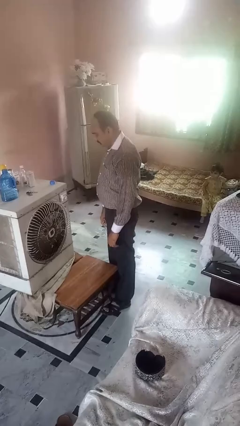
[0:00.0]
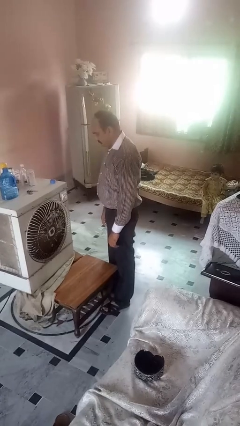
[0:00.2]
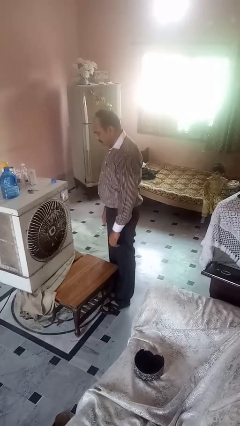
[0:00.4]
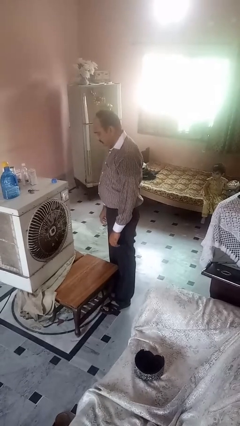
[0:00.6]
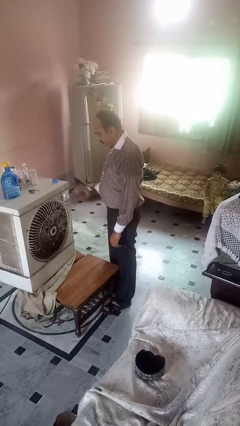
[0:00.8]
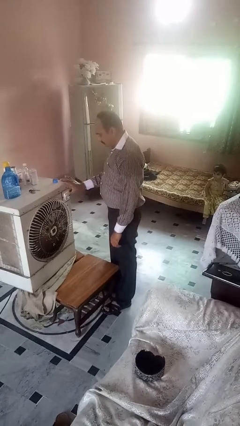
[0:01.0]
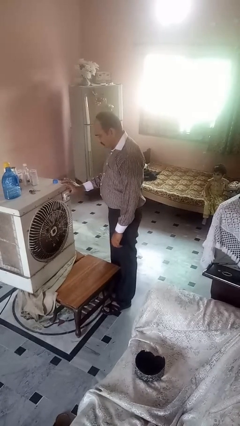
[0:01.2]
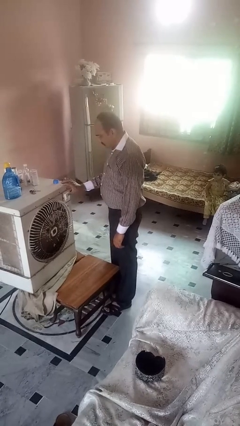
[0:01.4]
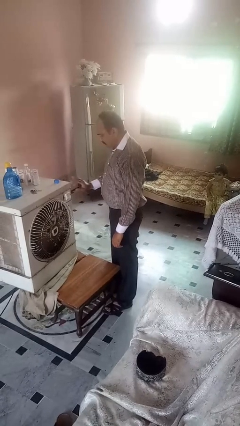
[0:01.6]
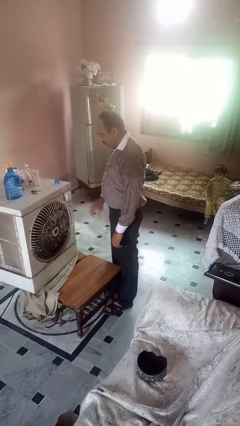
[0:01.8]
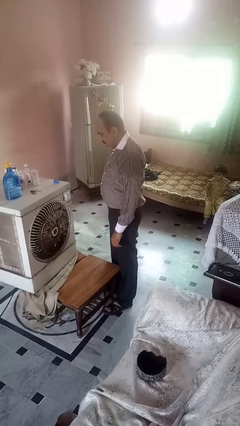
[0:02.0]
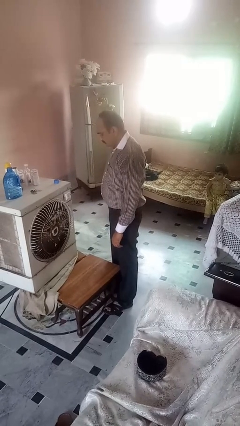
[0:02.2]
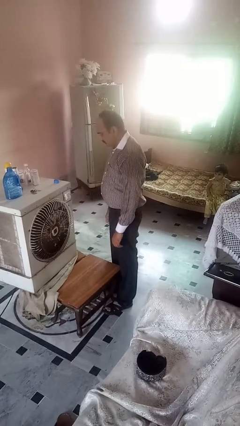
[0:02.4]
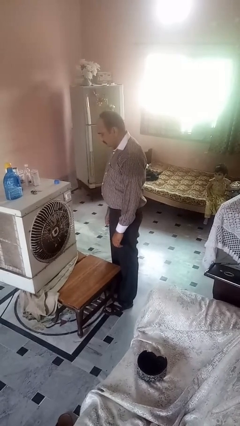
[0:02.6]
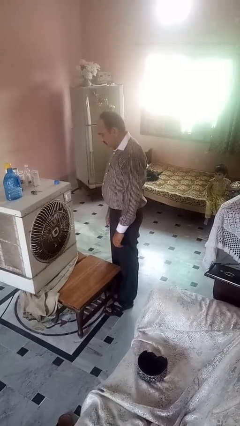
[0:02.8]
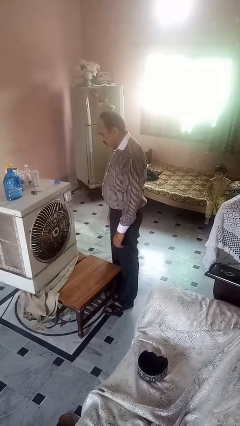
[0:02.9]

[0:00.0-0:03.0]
person turns off fan

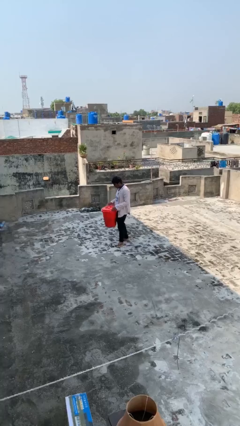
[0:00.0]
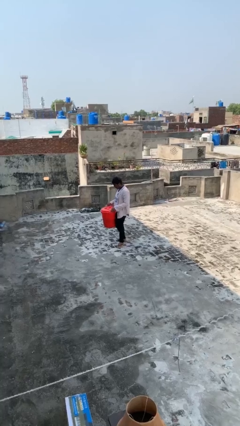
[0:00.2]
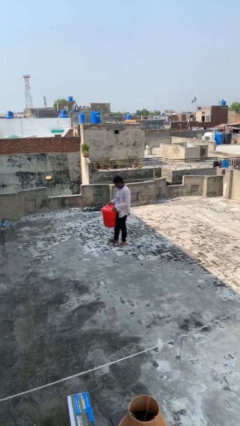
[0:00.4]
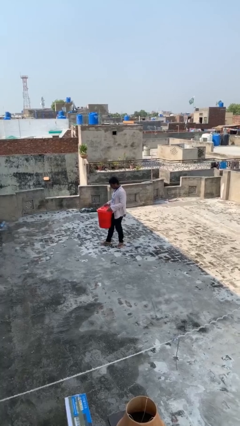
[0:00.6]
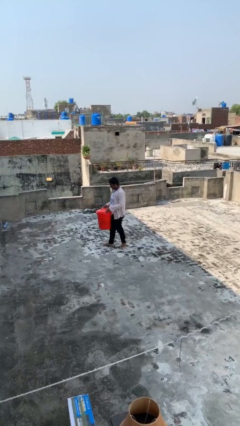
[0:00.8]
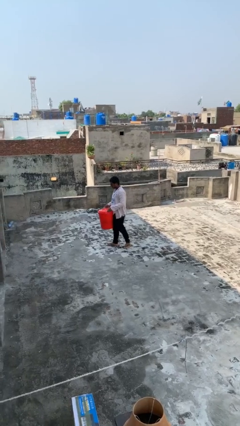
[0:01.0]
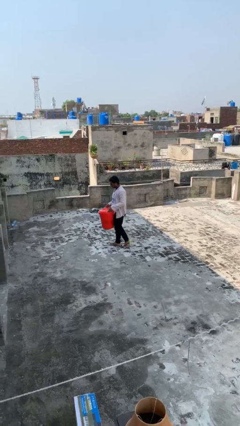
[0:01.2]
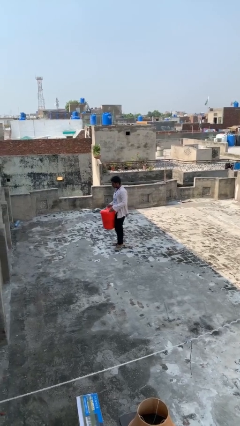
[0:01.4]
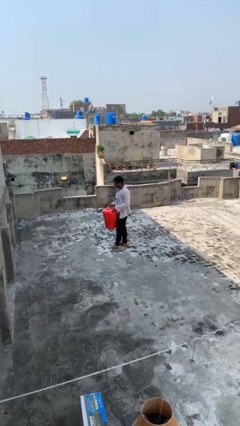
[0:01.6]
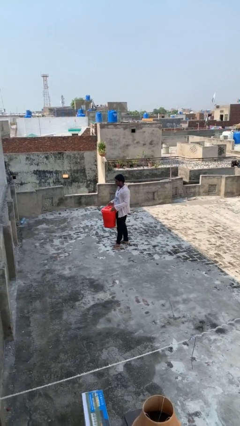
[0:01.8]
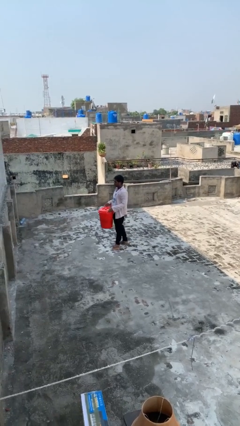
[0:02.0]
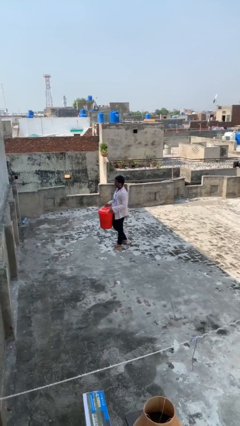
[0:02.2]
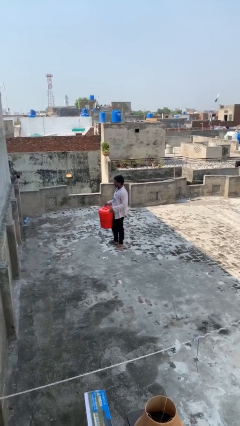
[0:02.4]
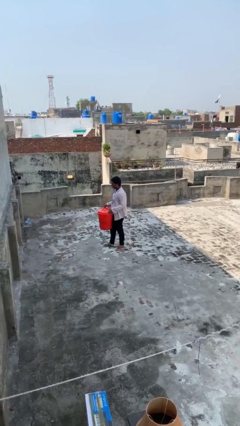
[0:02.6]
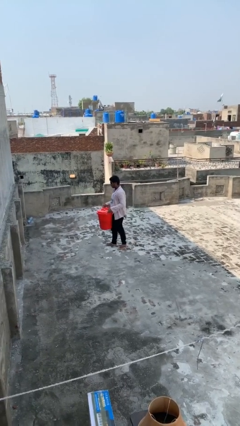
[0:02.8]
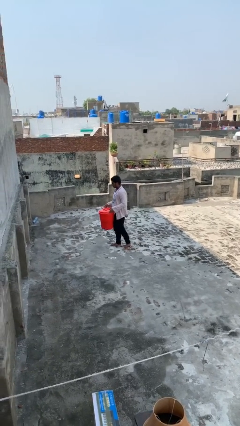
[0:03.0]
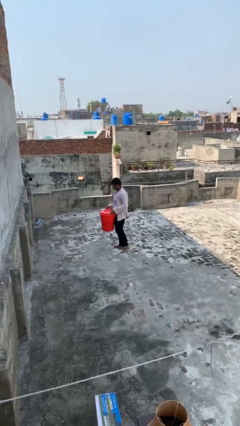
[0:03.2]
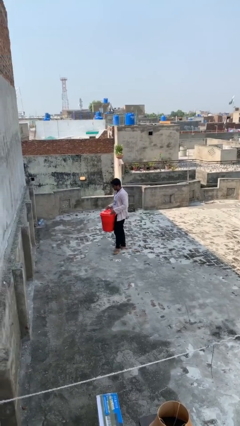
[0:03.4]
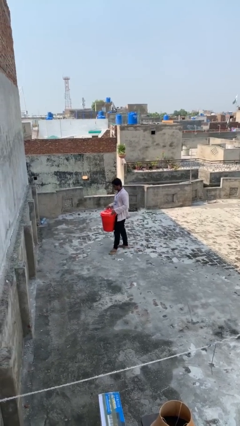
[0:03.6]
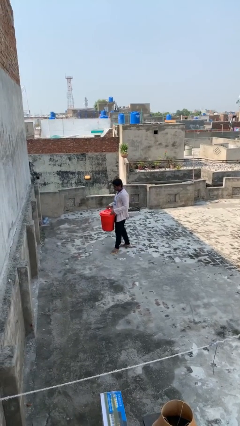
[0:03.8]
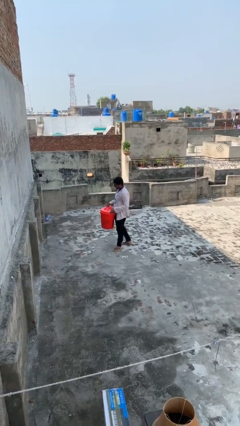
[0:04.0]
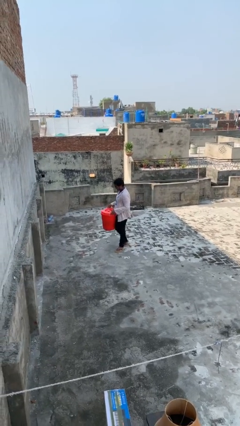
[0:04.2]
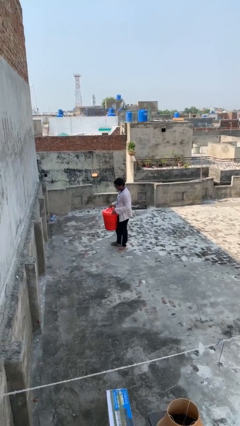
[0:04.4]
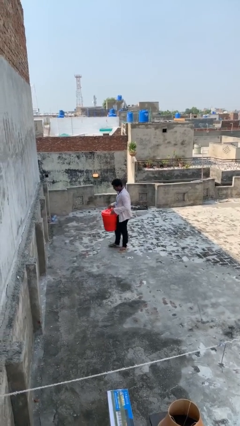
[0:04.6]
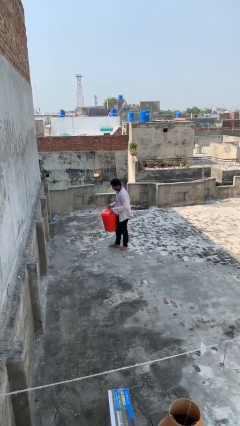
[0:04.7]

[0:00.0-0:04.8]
person carries heavy object

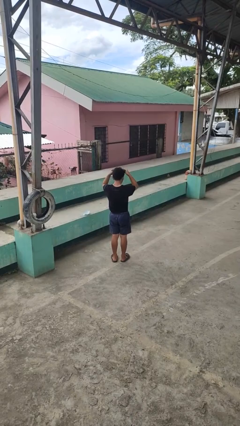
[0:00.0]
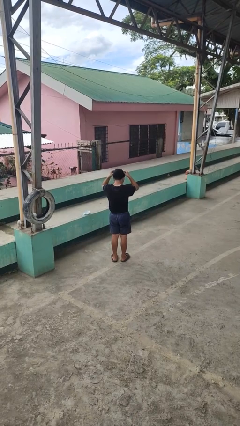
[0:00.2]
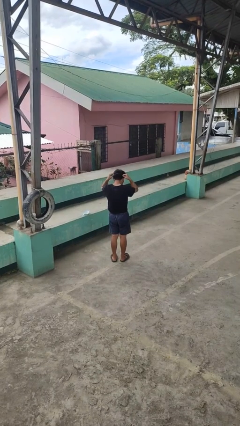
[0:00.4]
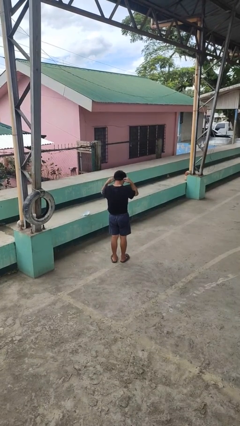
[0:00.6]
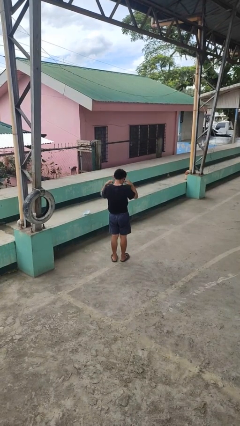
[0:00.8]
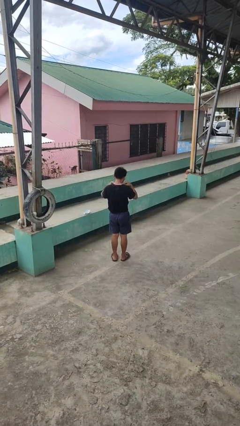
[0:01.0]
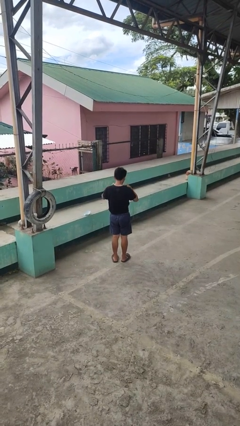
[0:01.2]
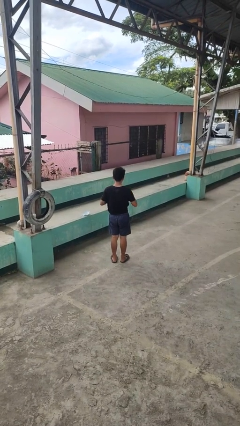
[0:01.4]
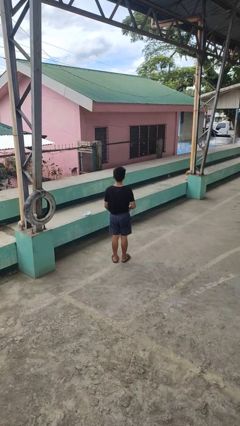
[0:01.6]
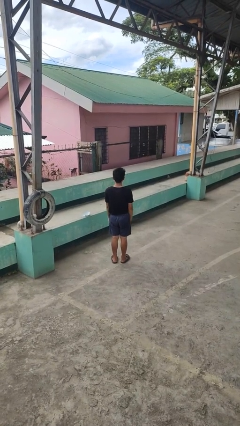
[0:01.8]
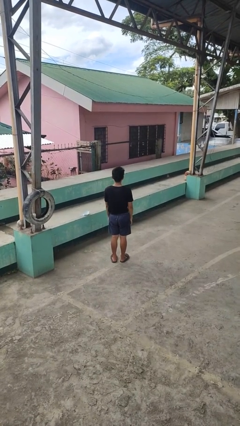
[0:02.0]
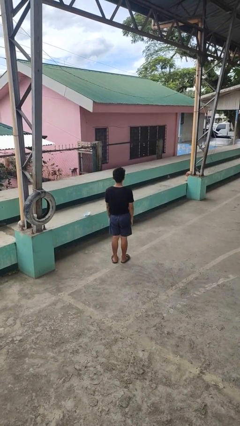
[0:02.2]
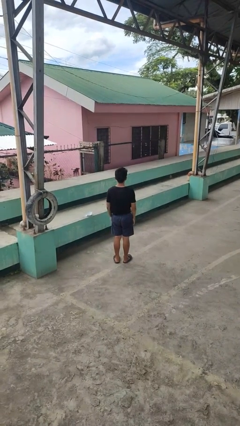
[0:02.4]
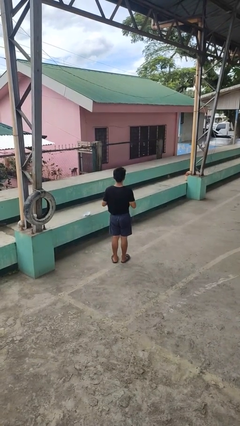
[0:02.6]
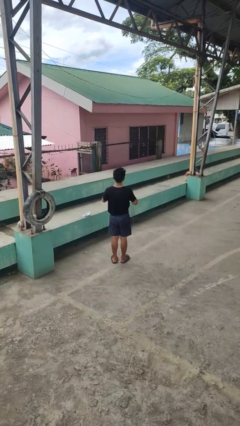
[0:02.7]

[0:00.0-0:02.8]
person puts on necklace

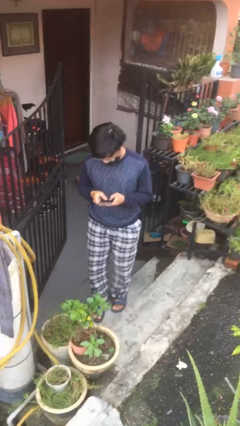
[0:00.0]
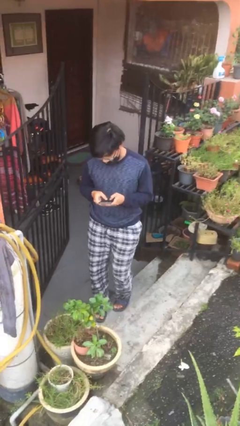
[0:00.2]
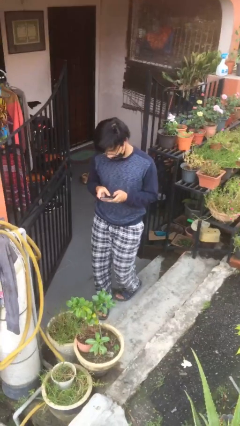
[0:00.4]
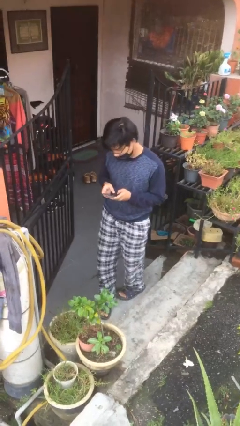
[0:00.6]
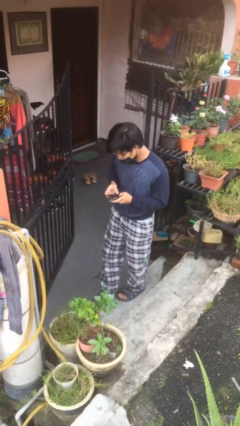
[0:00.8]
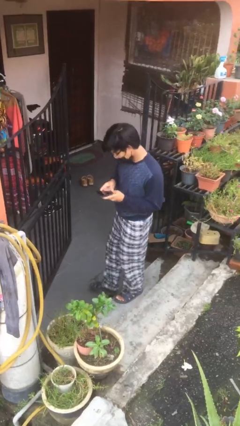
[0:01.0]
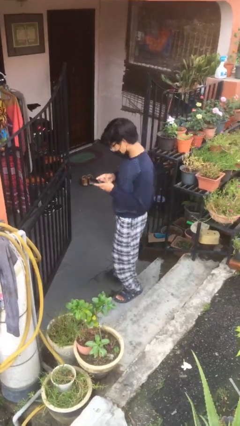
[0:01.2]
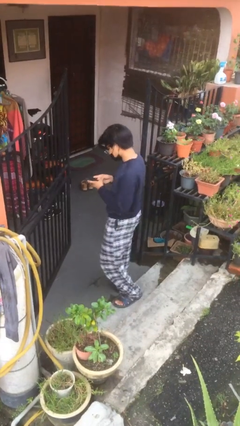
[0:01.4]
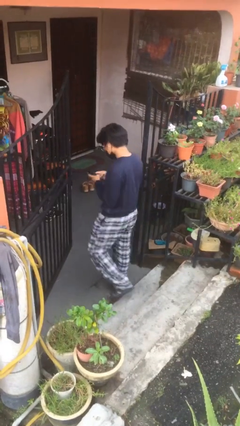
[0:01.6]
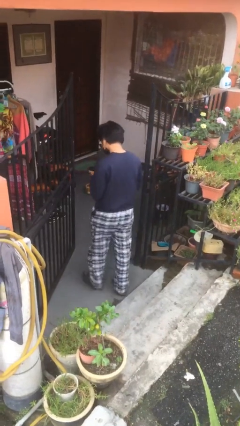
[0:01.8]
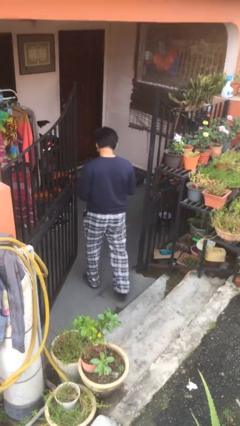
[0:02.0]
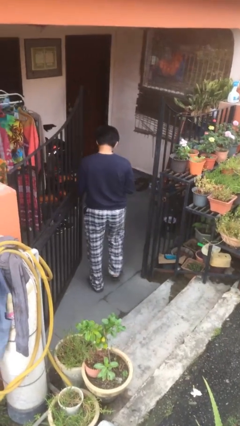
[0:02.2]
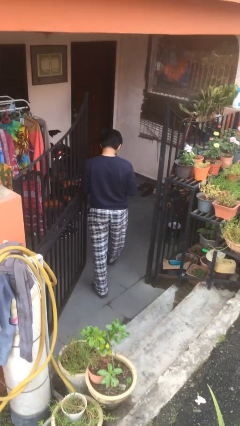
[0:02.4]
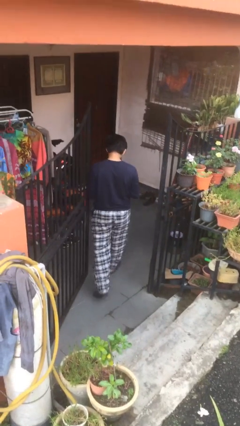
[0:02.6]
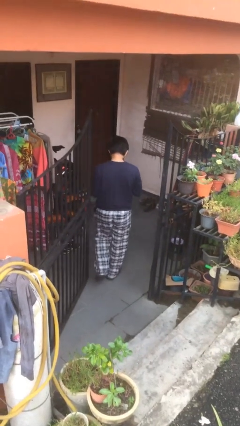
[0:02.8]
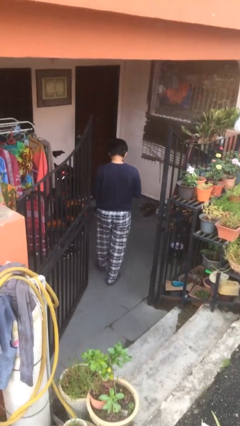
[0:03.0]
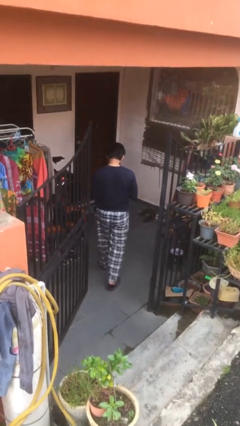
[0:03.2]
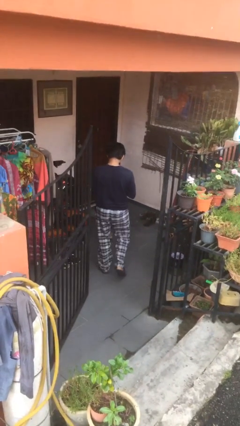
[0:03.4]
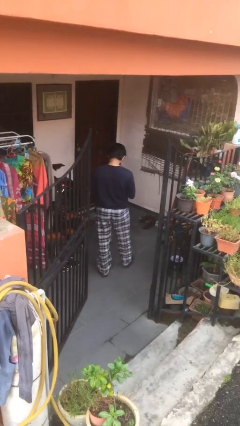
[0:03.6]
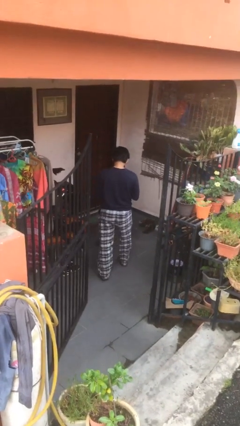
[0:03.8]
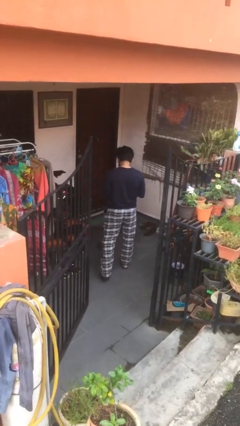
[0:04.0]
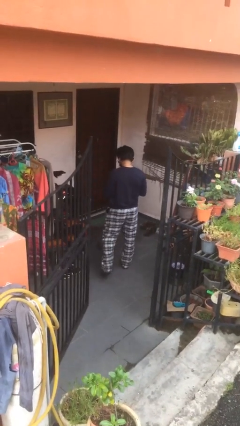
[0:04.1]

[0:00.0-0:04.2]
person exits scene through structure

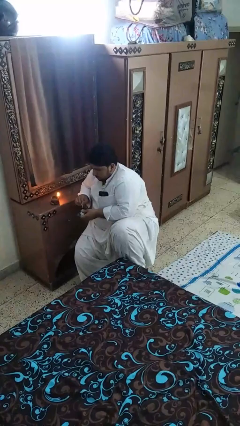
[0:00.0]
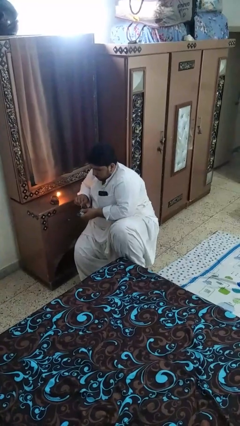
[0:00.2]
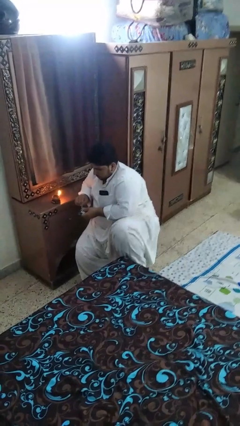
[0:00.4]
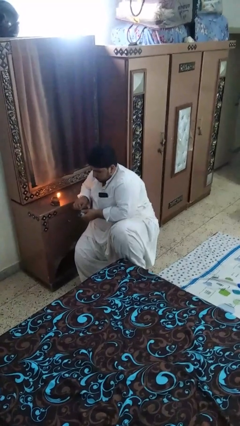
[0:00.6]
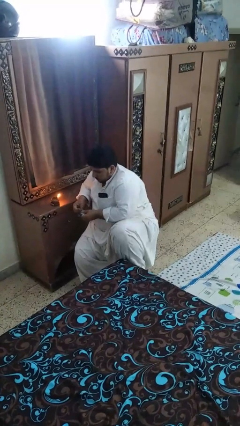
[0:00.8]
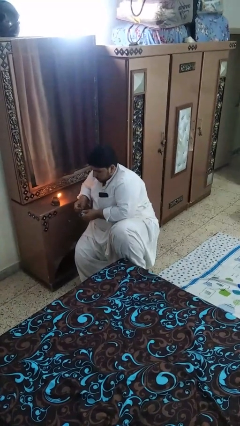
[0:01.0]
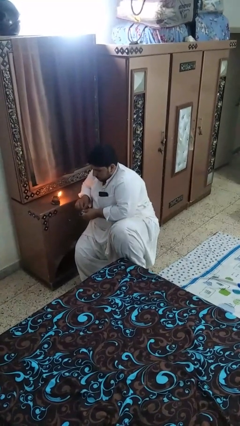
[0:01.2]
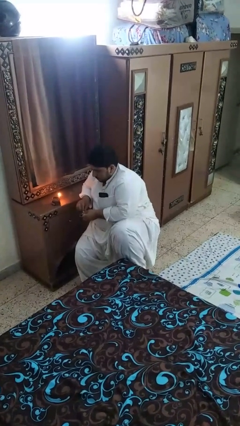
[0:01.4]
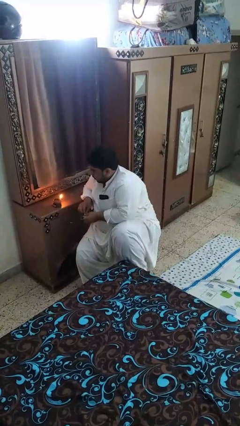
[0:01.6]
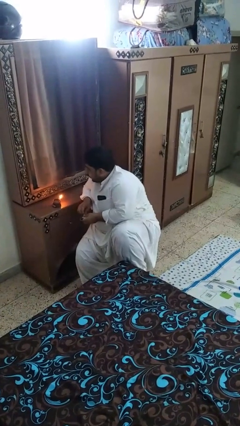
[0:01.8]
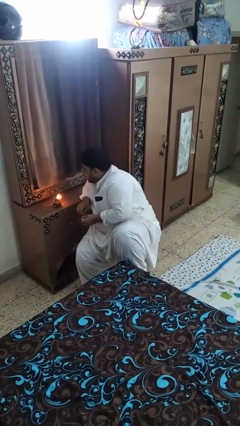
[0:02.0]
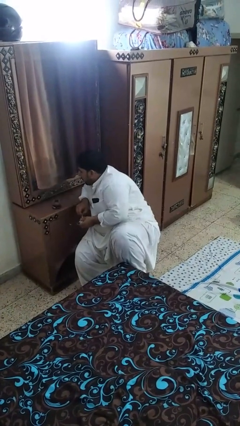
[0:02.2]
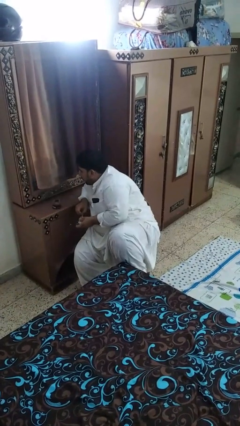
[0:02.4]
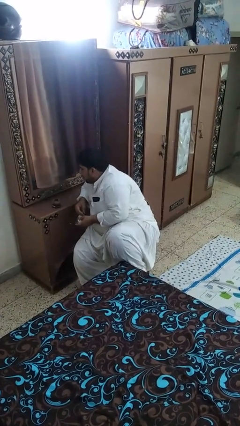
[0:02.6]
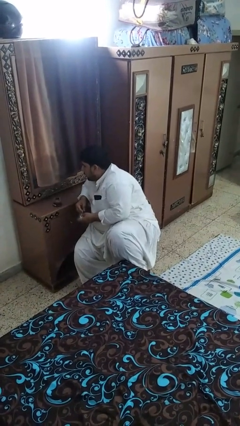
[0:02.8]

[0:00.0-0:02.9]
person extinguishes candle
